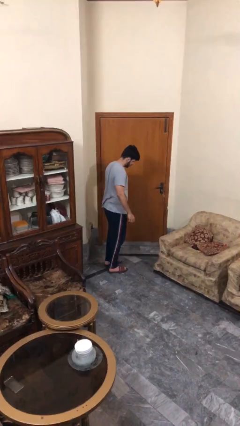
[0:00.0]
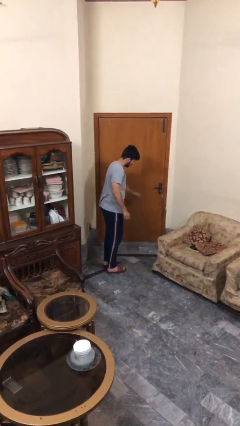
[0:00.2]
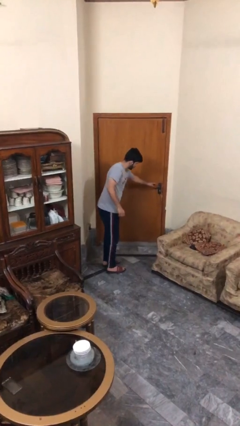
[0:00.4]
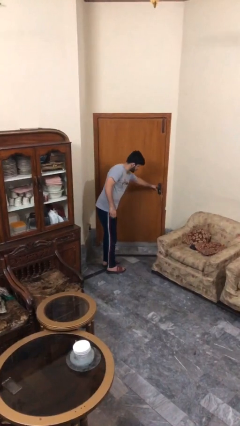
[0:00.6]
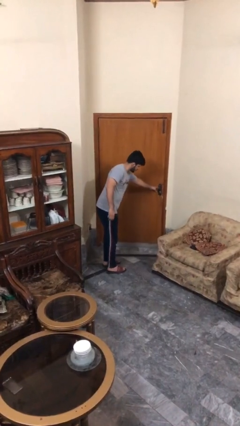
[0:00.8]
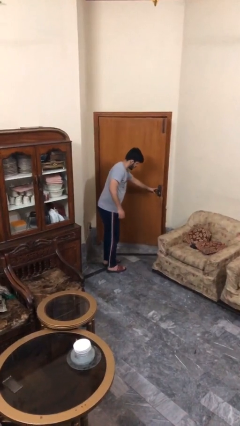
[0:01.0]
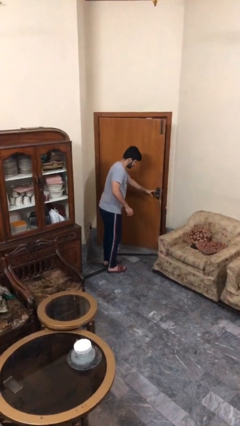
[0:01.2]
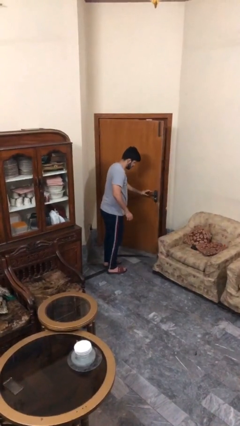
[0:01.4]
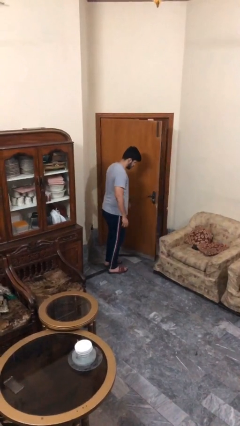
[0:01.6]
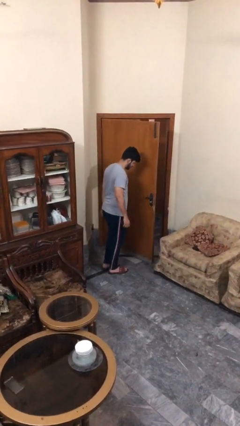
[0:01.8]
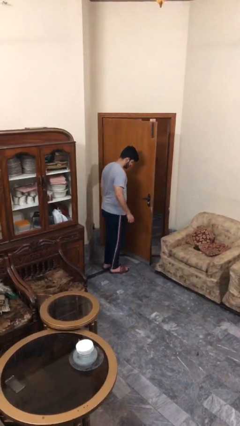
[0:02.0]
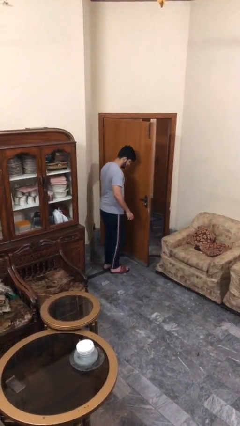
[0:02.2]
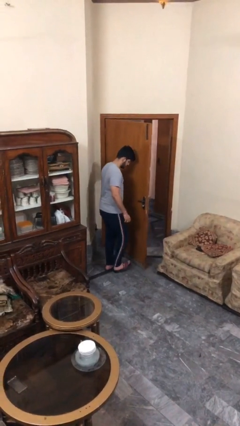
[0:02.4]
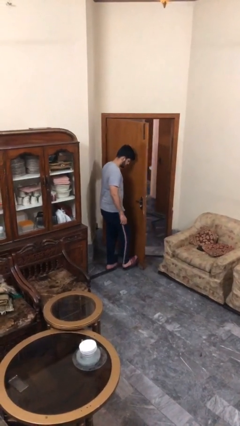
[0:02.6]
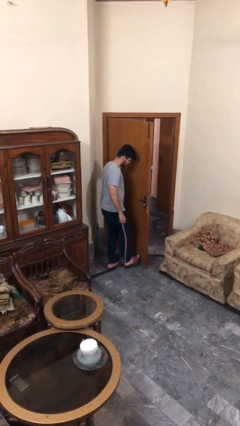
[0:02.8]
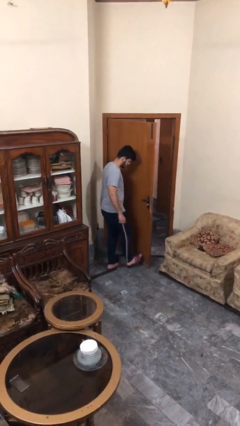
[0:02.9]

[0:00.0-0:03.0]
person opens facility door

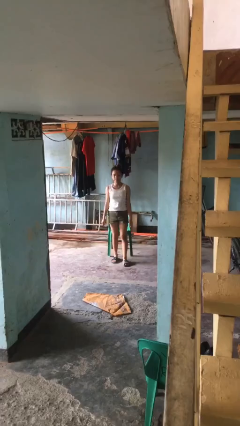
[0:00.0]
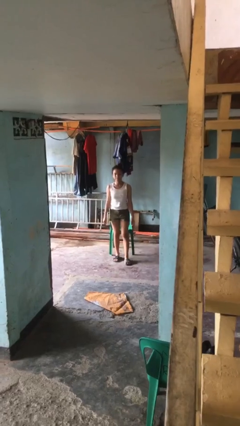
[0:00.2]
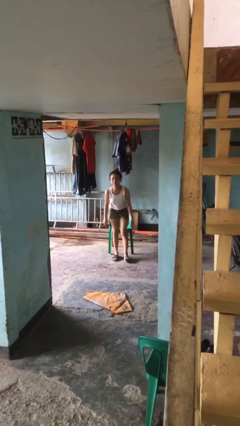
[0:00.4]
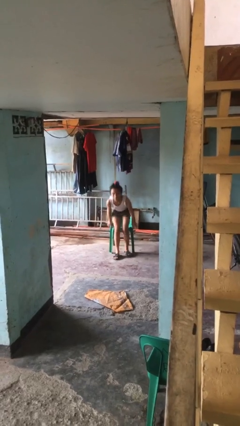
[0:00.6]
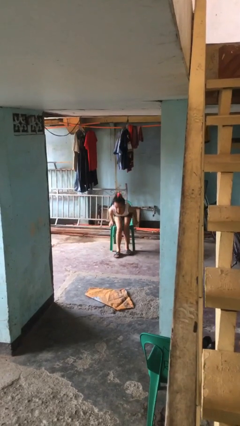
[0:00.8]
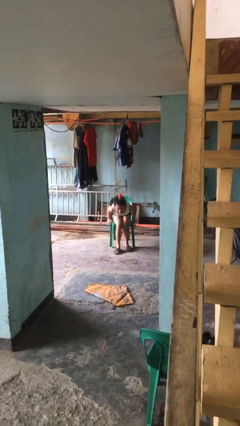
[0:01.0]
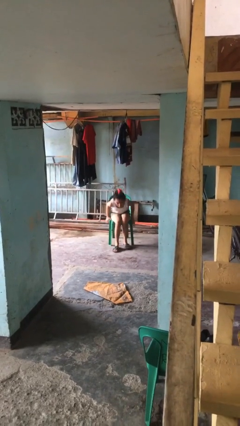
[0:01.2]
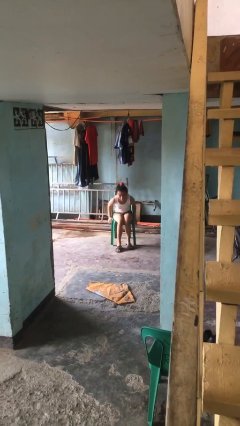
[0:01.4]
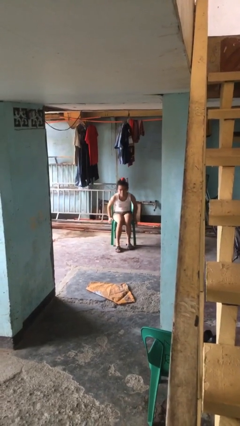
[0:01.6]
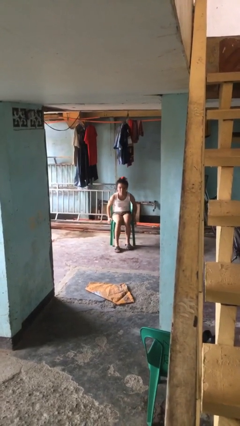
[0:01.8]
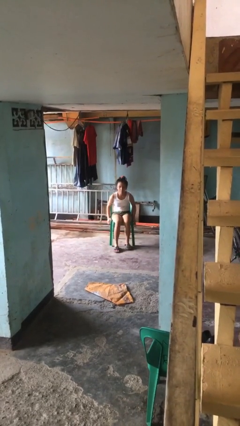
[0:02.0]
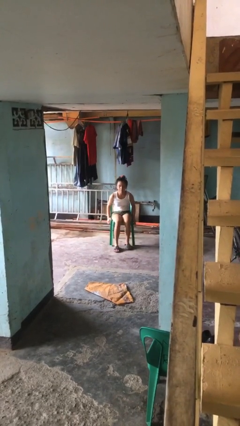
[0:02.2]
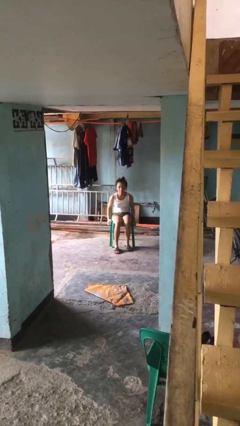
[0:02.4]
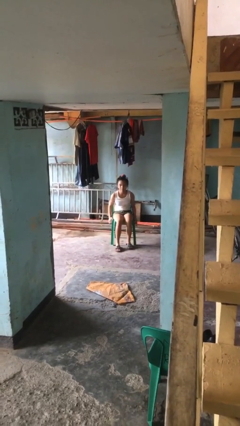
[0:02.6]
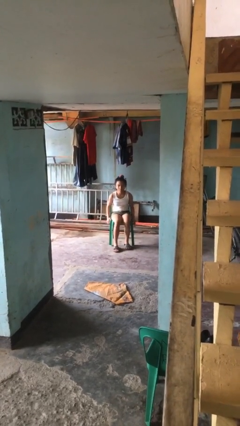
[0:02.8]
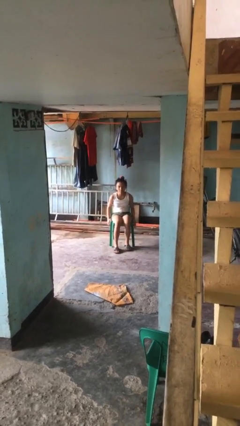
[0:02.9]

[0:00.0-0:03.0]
person sits down

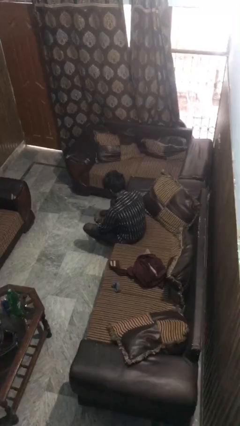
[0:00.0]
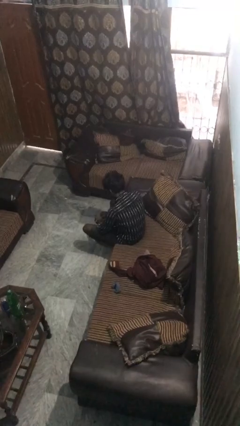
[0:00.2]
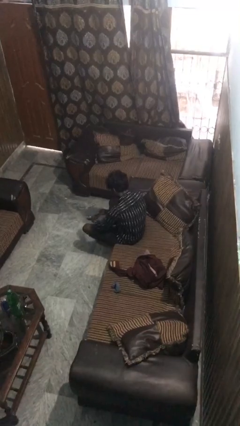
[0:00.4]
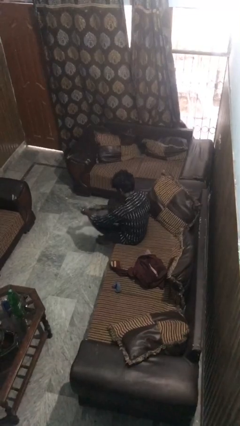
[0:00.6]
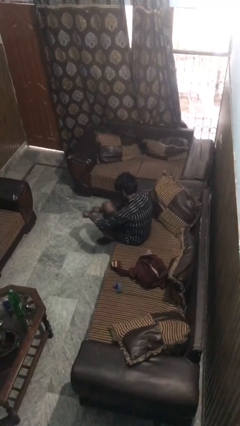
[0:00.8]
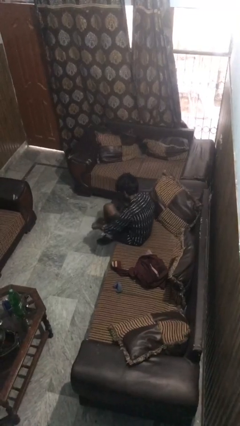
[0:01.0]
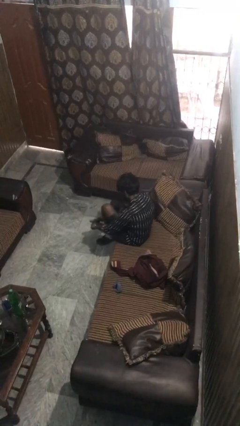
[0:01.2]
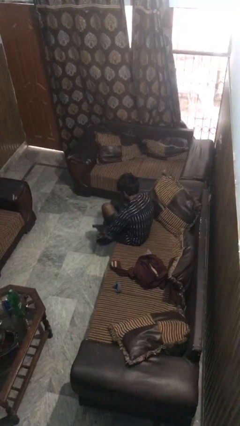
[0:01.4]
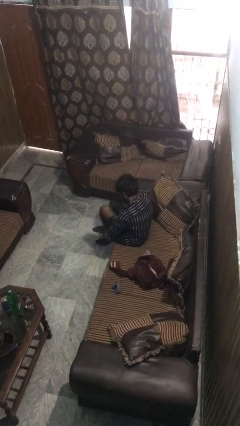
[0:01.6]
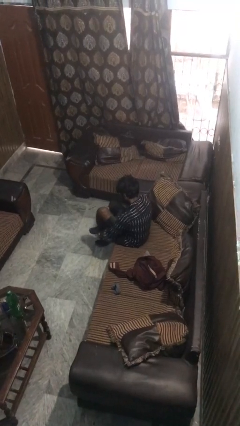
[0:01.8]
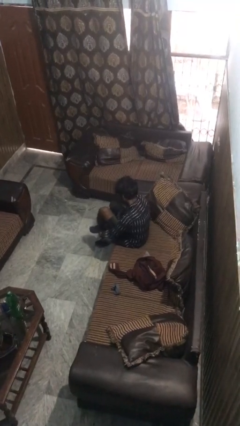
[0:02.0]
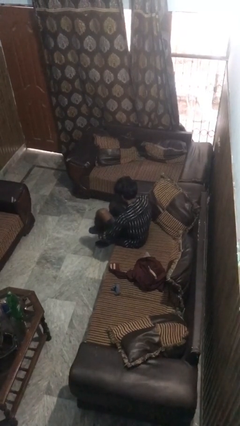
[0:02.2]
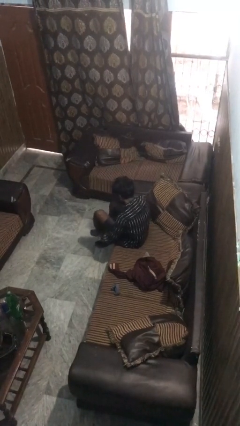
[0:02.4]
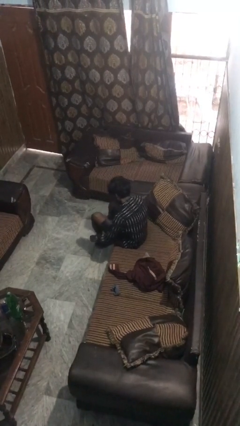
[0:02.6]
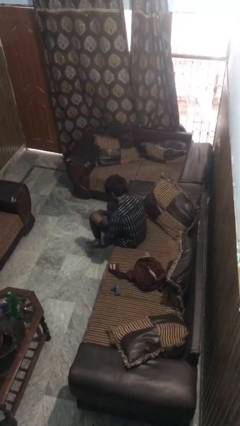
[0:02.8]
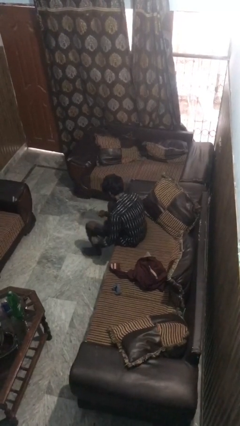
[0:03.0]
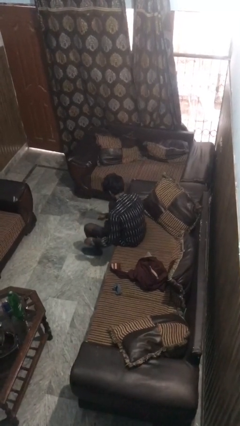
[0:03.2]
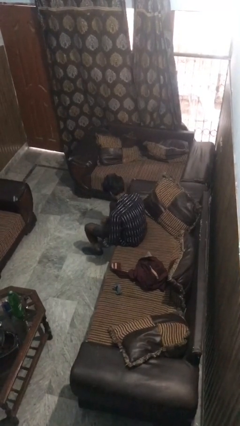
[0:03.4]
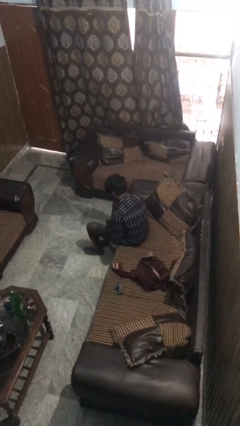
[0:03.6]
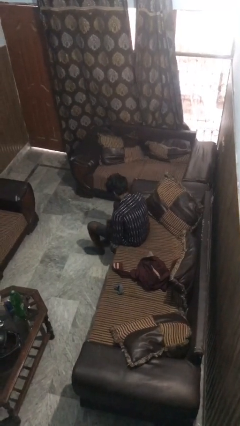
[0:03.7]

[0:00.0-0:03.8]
person puts on socks

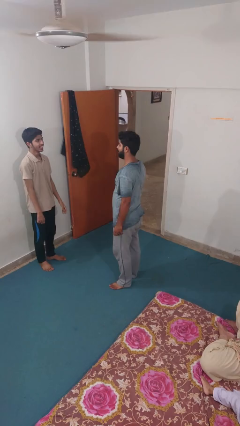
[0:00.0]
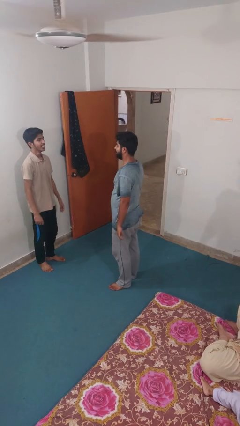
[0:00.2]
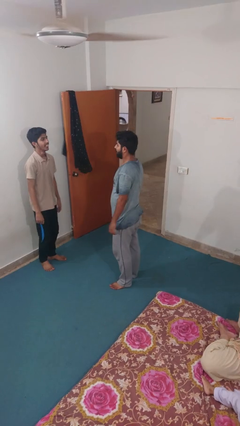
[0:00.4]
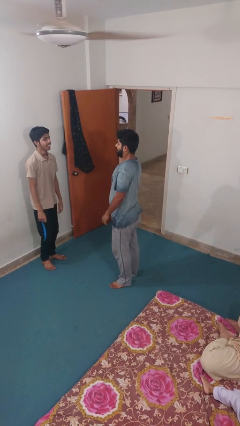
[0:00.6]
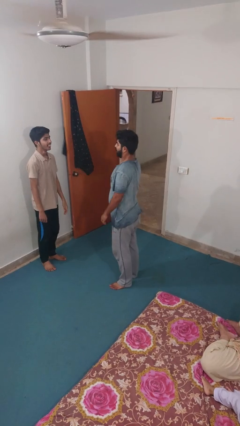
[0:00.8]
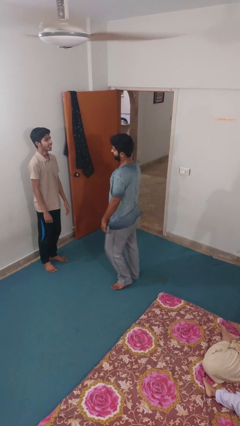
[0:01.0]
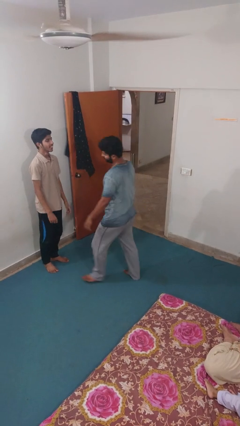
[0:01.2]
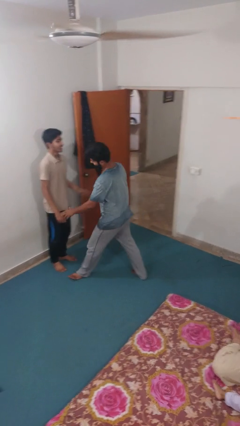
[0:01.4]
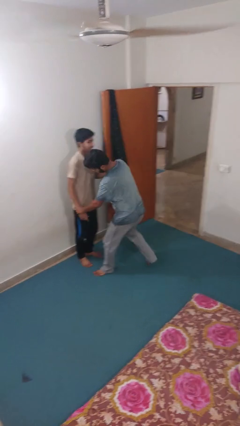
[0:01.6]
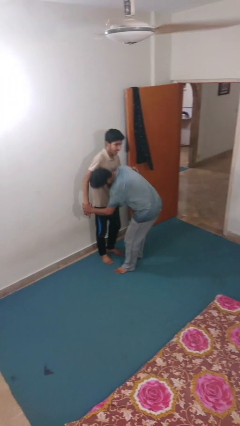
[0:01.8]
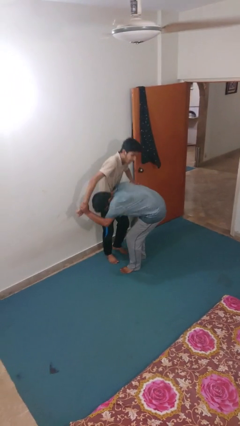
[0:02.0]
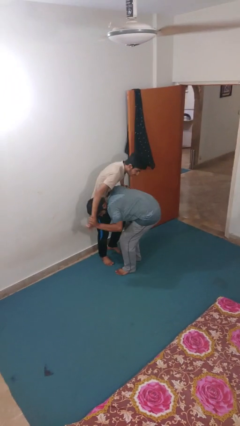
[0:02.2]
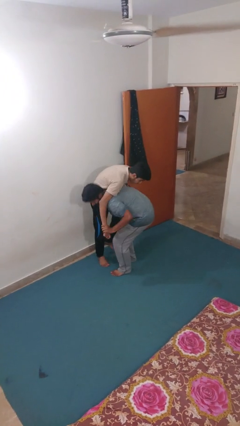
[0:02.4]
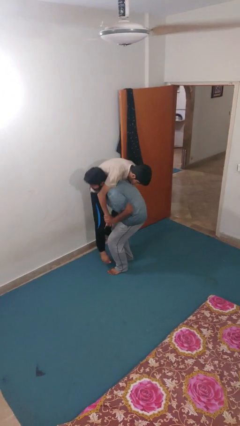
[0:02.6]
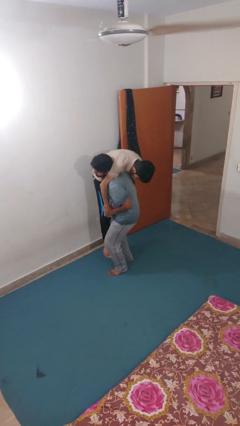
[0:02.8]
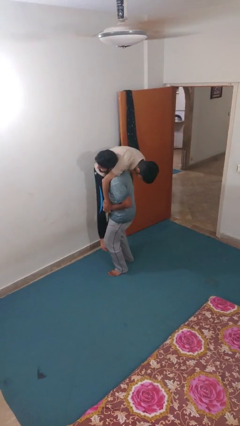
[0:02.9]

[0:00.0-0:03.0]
person carries person over shoulder

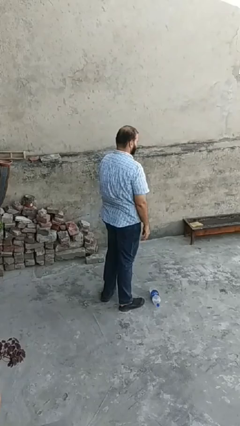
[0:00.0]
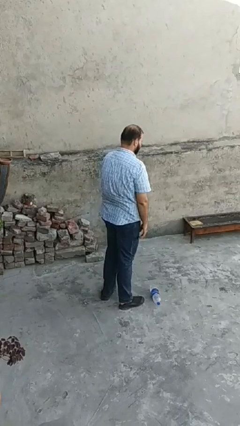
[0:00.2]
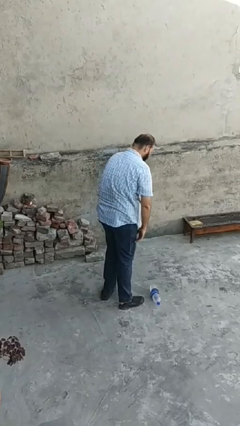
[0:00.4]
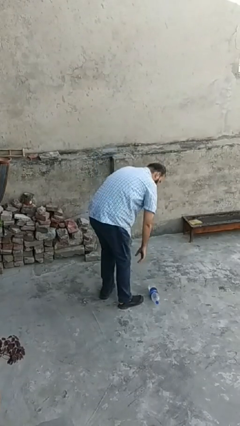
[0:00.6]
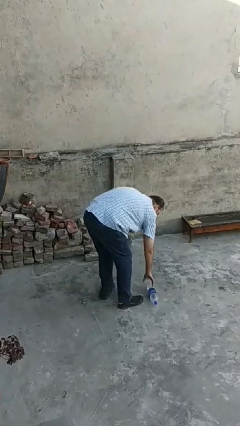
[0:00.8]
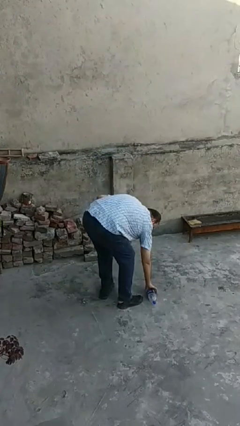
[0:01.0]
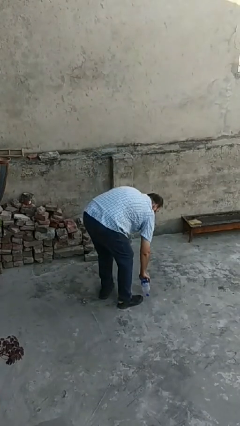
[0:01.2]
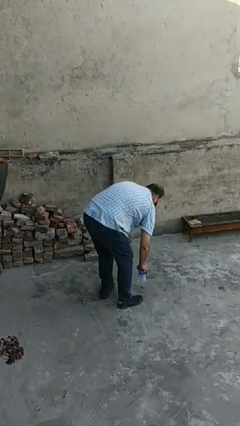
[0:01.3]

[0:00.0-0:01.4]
person picks up object from floor

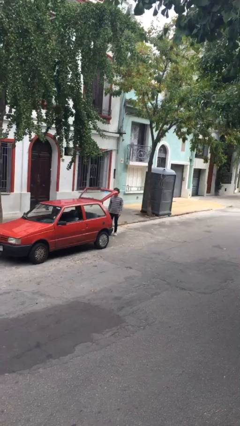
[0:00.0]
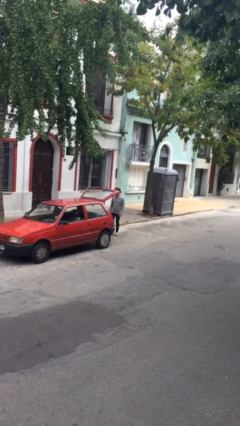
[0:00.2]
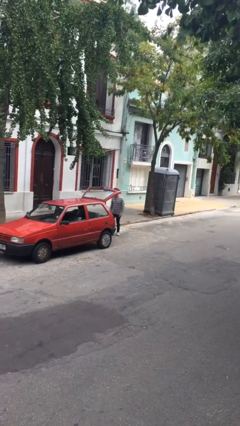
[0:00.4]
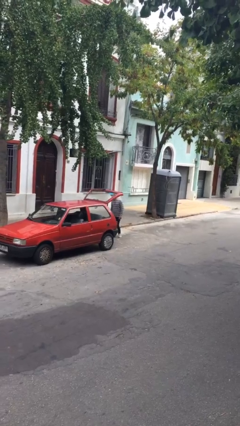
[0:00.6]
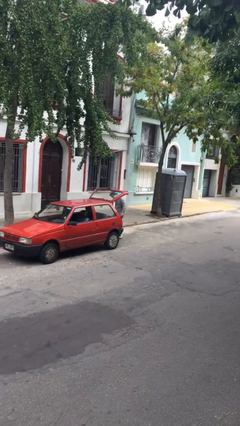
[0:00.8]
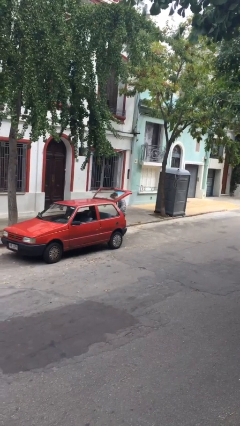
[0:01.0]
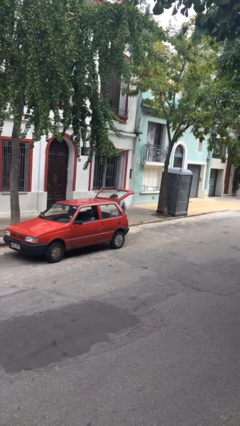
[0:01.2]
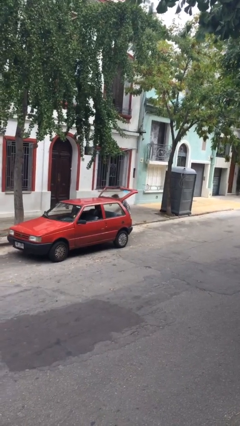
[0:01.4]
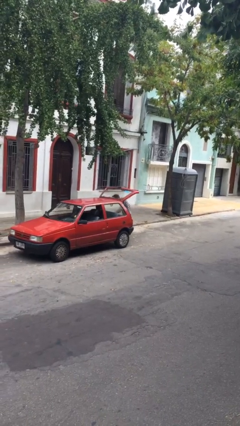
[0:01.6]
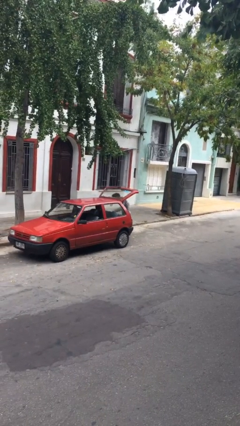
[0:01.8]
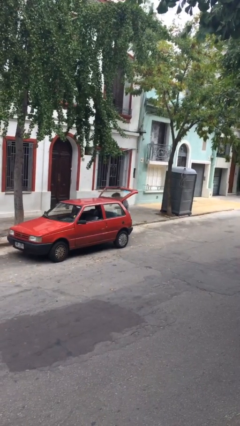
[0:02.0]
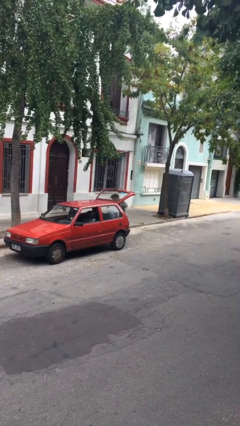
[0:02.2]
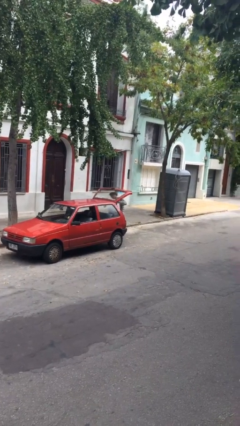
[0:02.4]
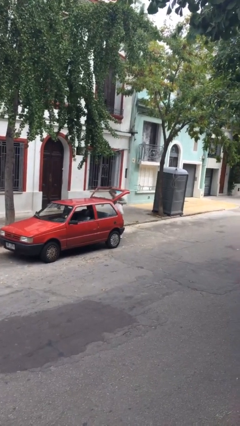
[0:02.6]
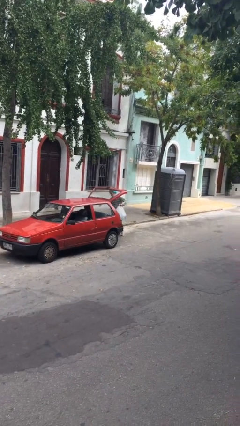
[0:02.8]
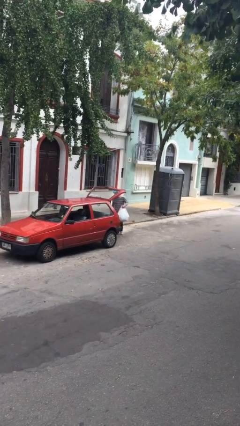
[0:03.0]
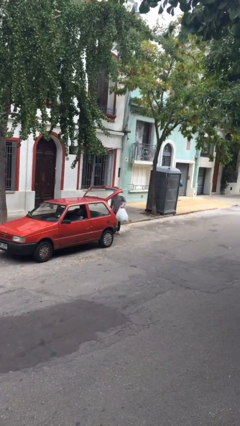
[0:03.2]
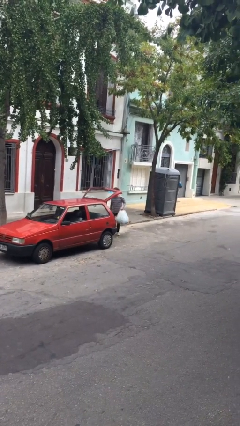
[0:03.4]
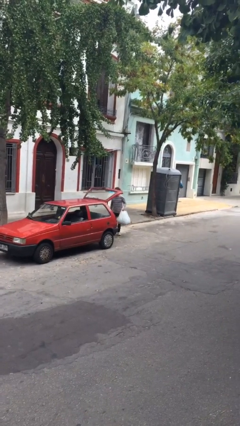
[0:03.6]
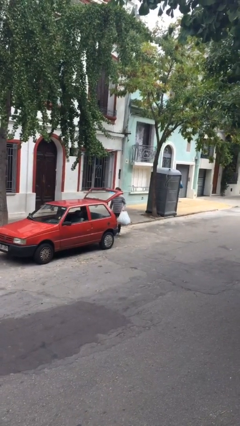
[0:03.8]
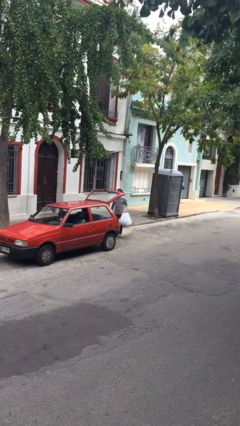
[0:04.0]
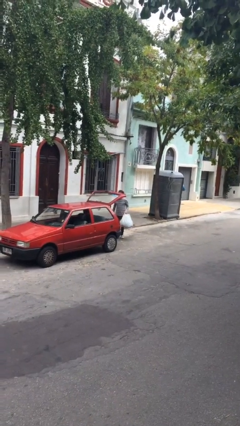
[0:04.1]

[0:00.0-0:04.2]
person unloads car
